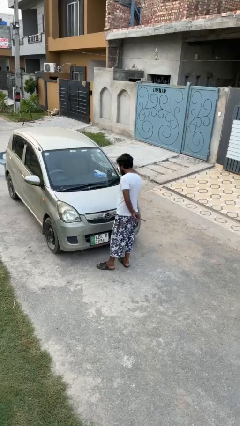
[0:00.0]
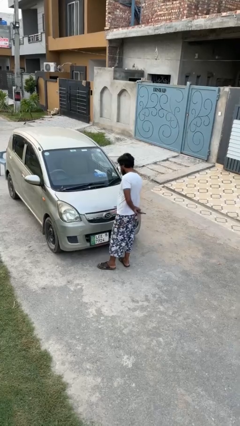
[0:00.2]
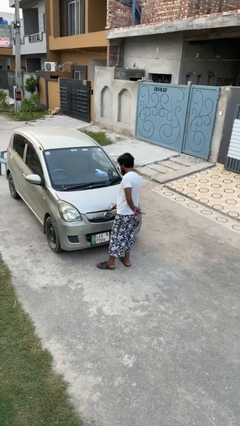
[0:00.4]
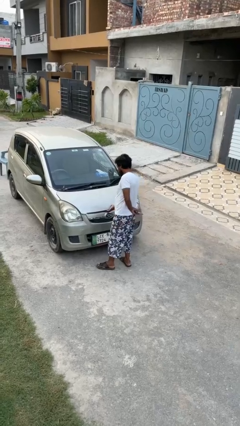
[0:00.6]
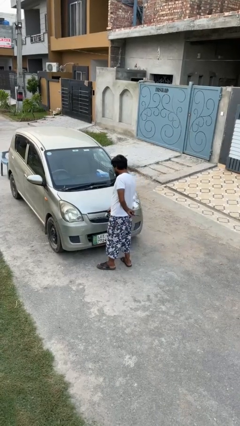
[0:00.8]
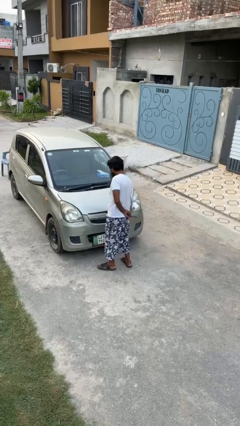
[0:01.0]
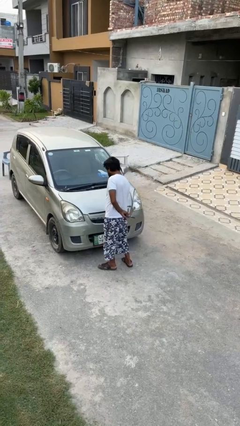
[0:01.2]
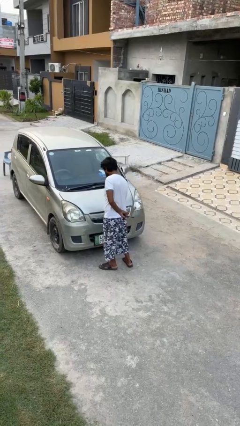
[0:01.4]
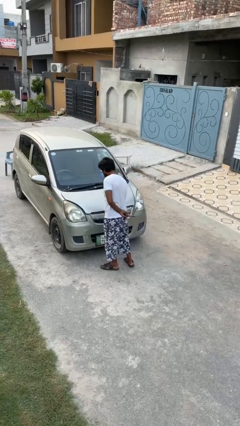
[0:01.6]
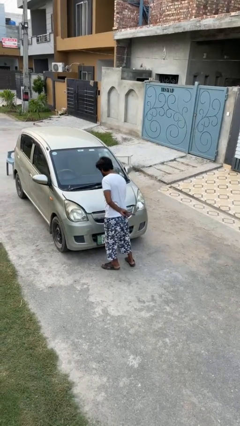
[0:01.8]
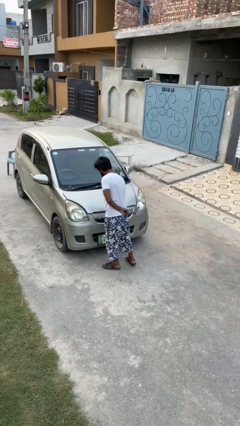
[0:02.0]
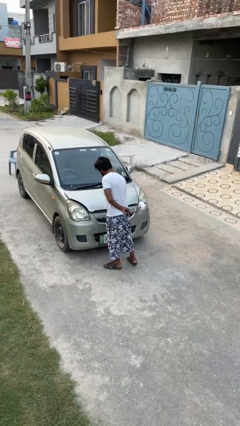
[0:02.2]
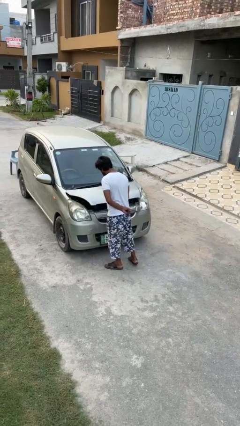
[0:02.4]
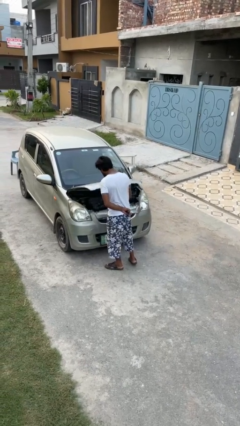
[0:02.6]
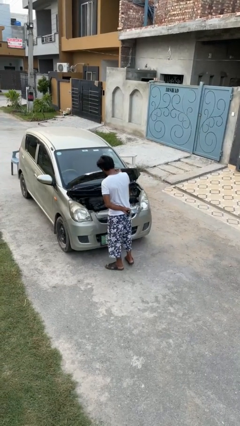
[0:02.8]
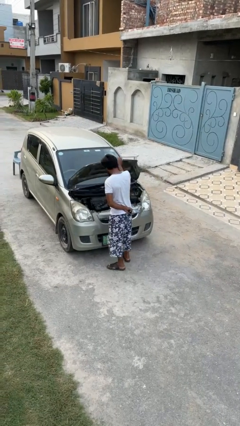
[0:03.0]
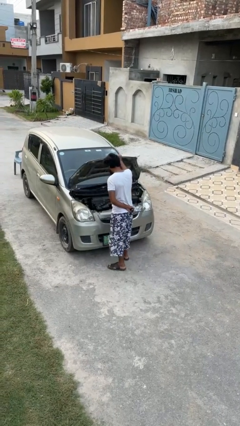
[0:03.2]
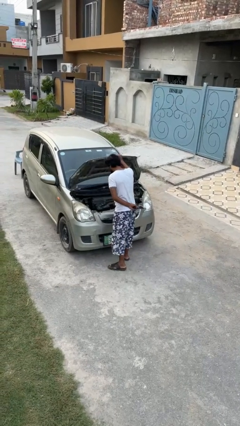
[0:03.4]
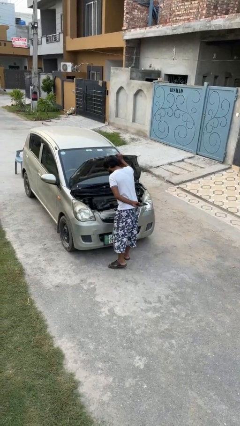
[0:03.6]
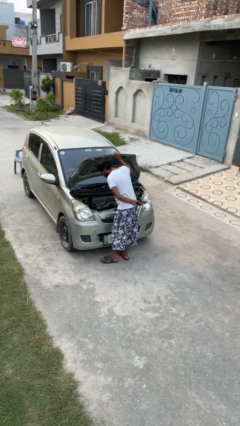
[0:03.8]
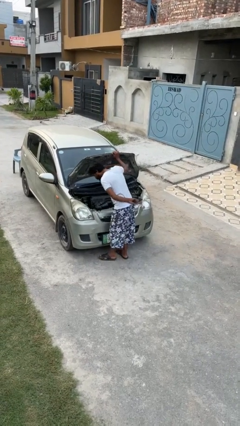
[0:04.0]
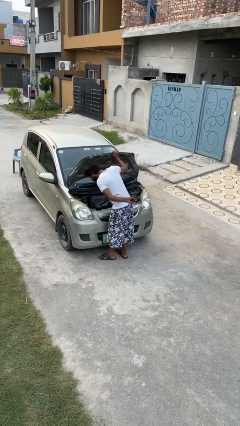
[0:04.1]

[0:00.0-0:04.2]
person opens car hood

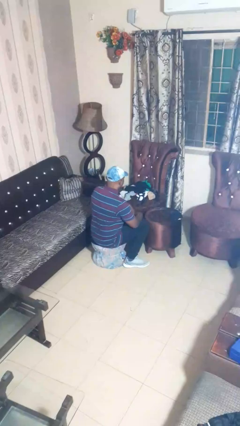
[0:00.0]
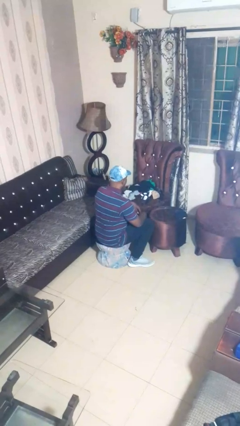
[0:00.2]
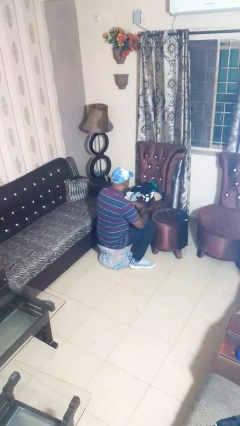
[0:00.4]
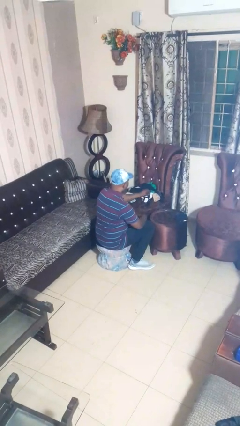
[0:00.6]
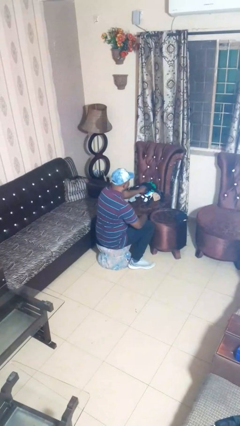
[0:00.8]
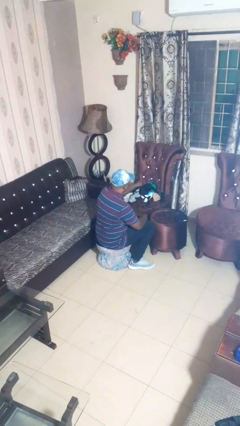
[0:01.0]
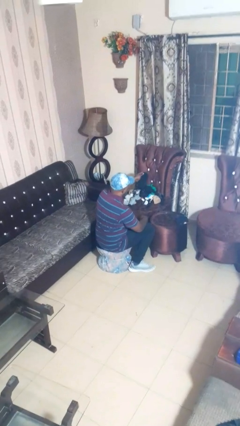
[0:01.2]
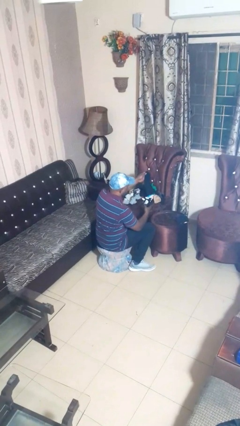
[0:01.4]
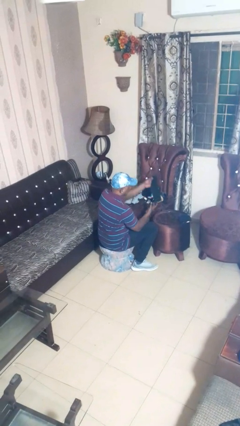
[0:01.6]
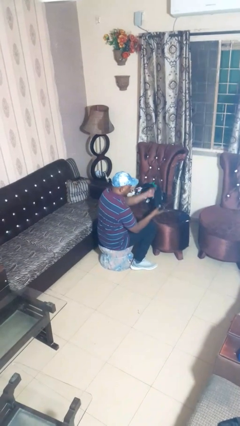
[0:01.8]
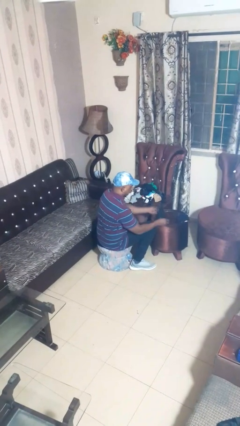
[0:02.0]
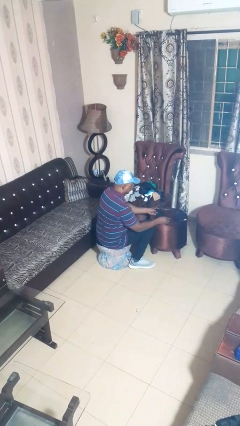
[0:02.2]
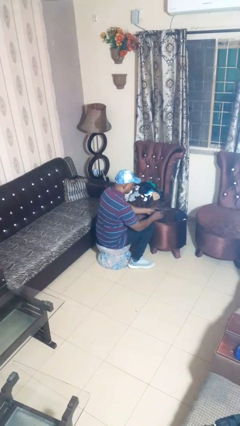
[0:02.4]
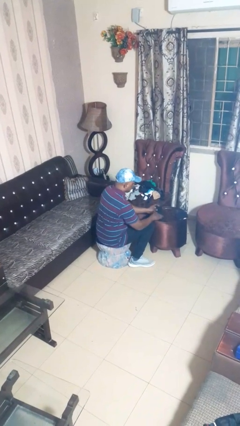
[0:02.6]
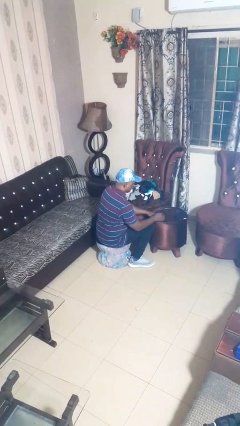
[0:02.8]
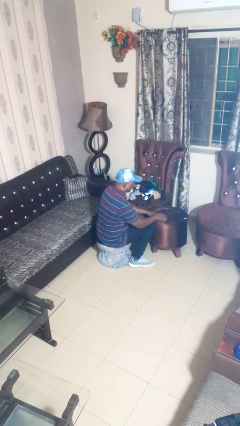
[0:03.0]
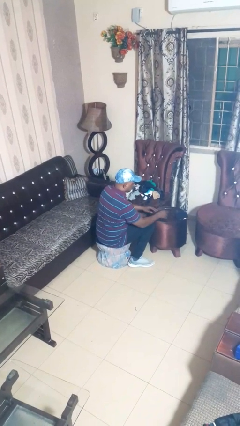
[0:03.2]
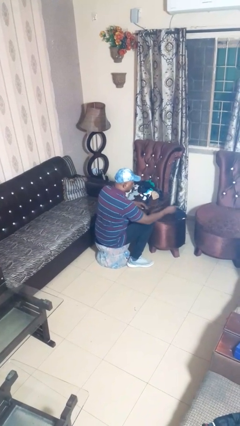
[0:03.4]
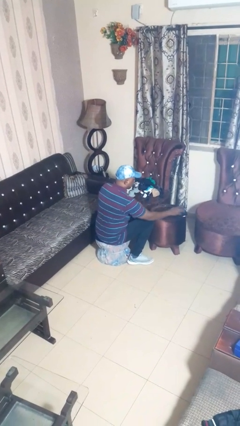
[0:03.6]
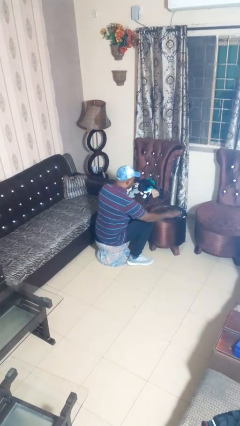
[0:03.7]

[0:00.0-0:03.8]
person folds socks

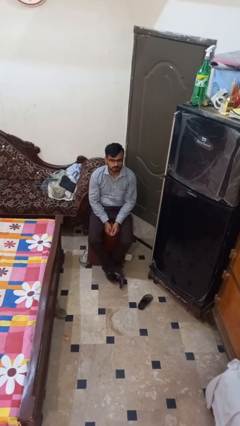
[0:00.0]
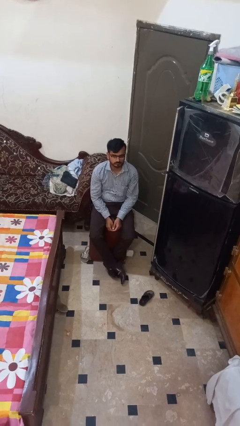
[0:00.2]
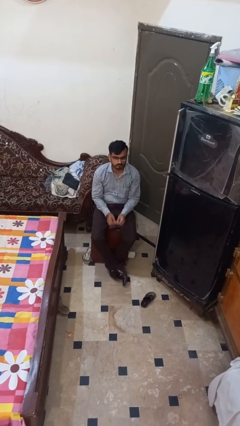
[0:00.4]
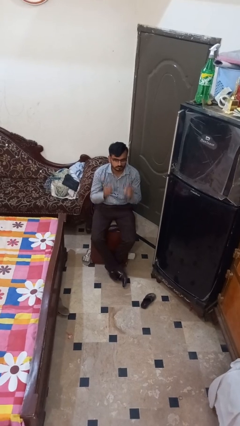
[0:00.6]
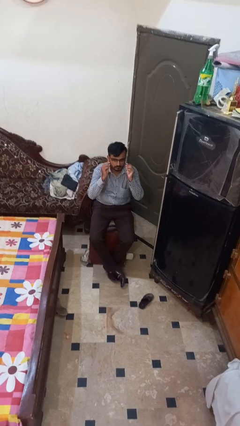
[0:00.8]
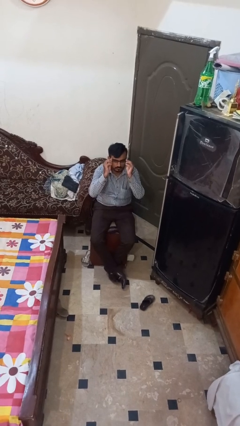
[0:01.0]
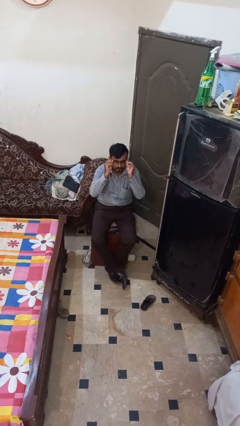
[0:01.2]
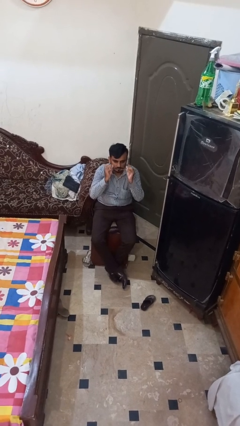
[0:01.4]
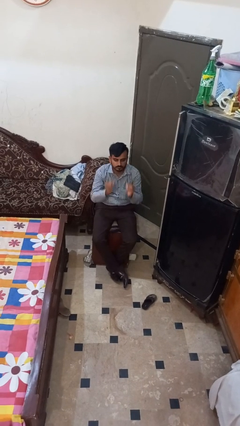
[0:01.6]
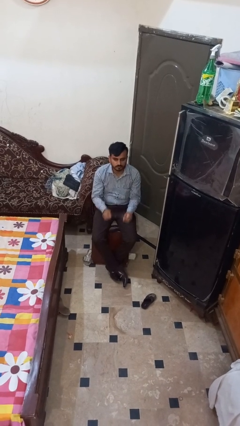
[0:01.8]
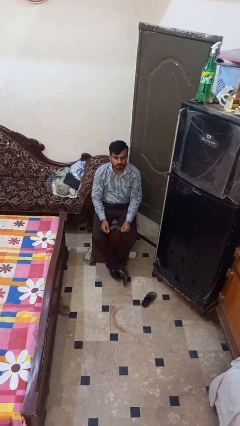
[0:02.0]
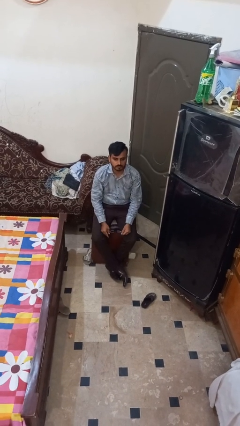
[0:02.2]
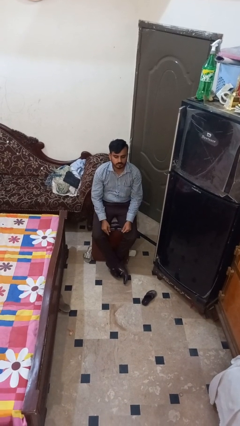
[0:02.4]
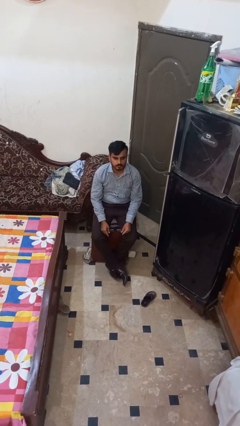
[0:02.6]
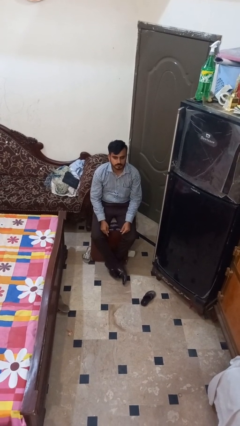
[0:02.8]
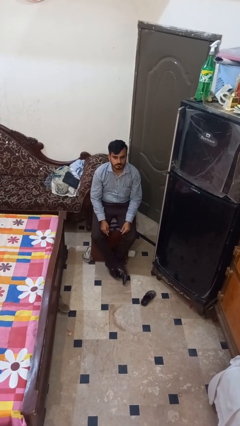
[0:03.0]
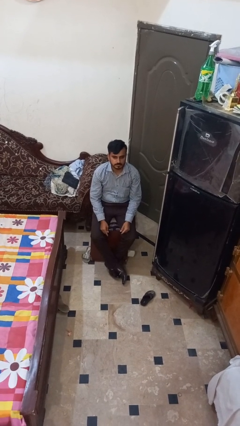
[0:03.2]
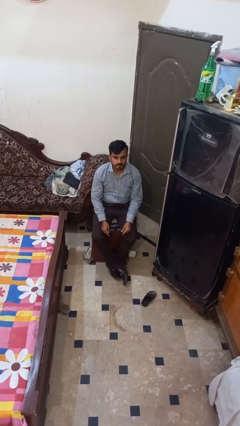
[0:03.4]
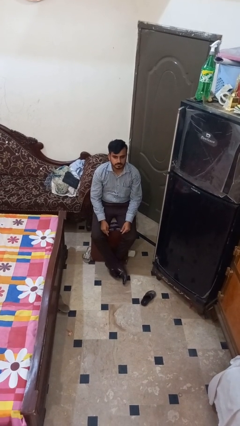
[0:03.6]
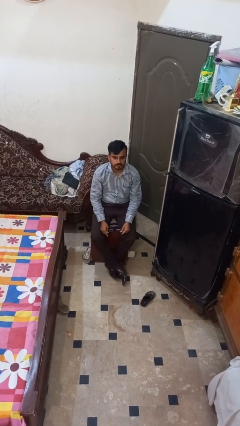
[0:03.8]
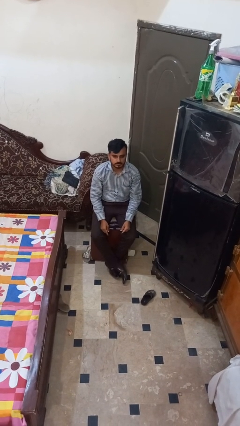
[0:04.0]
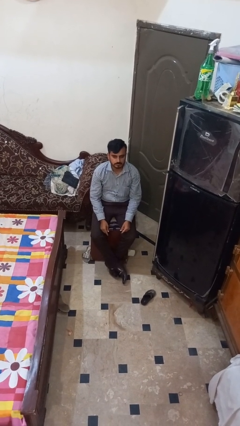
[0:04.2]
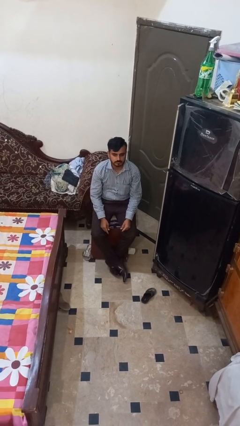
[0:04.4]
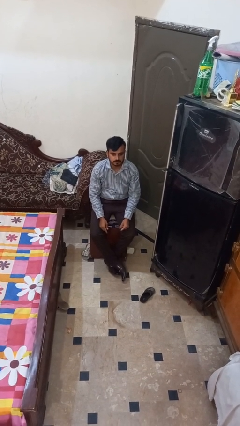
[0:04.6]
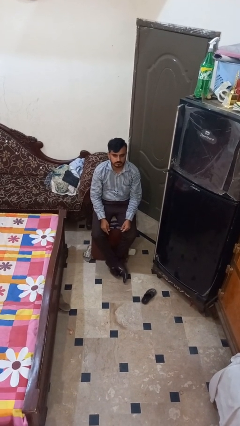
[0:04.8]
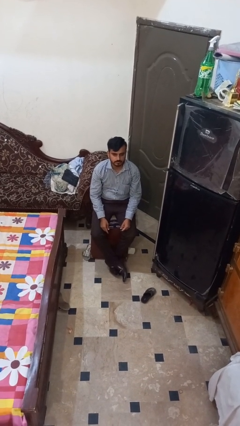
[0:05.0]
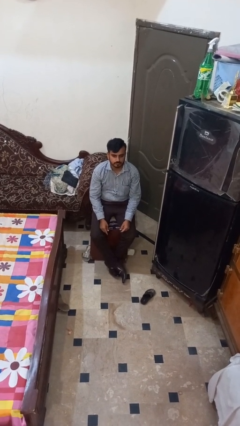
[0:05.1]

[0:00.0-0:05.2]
person takes off glasses

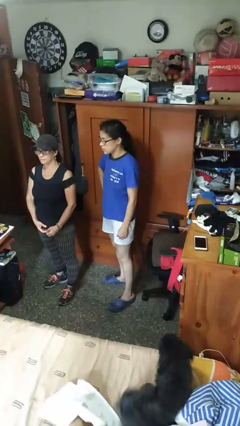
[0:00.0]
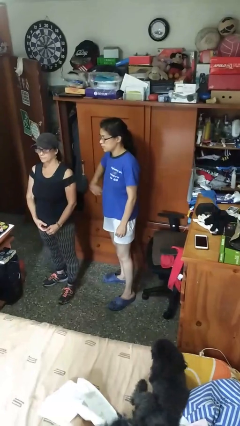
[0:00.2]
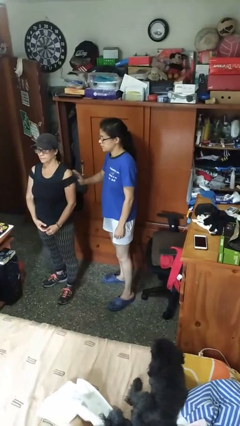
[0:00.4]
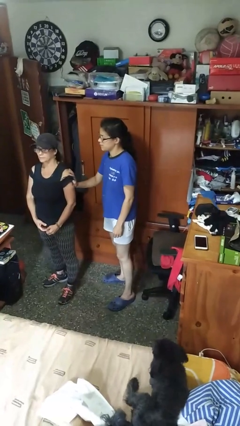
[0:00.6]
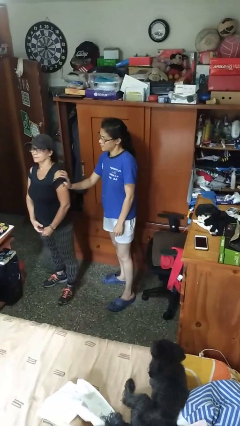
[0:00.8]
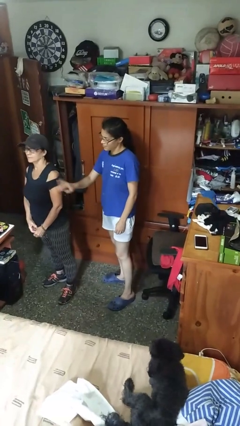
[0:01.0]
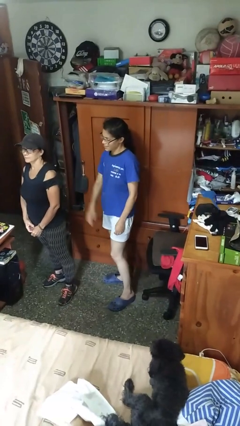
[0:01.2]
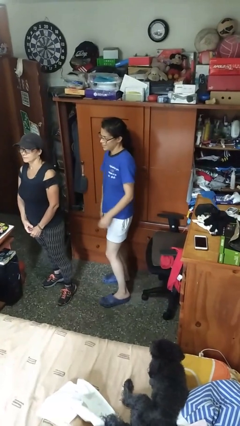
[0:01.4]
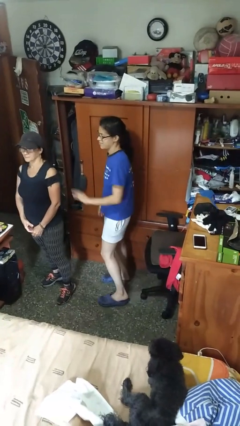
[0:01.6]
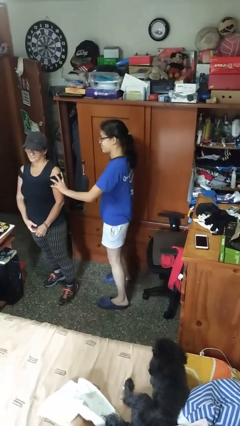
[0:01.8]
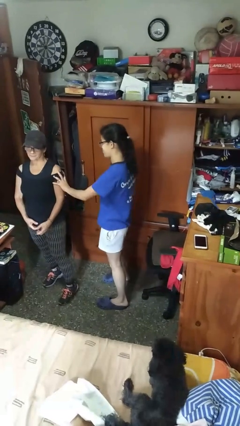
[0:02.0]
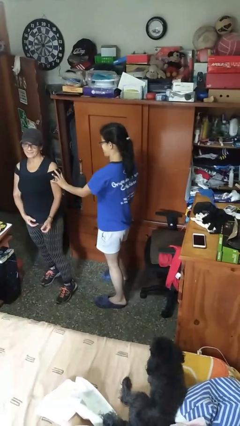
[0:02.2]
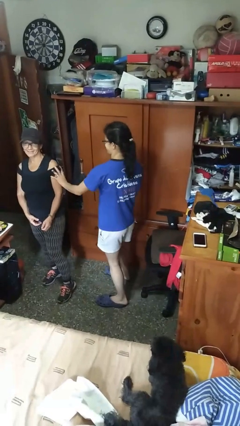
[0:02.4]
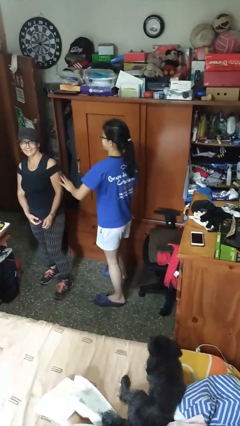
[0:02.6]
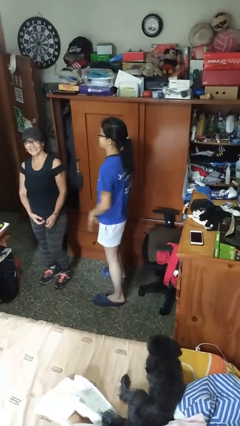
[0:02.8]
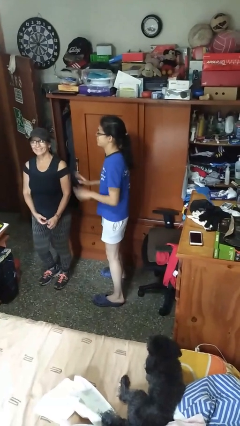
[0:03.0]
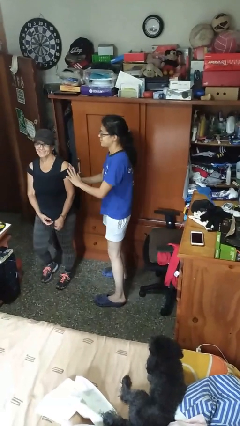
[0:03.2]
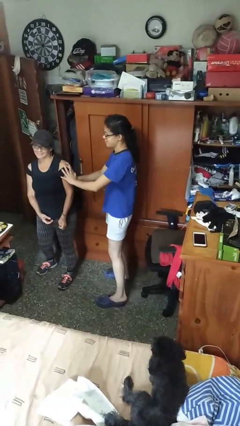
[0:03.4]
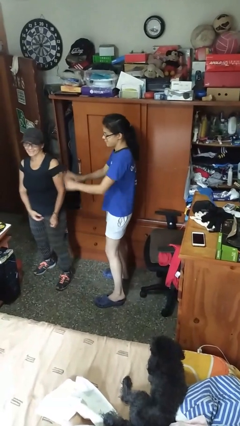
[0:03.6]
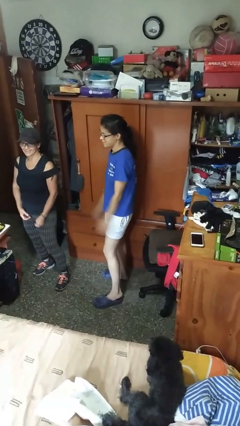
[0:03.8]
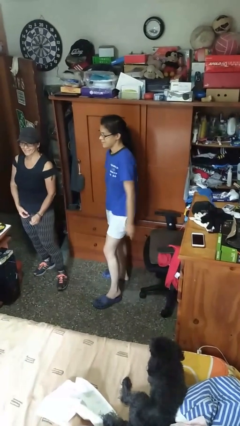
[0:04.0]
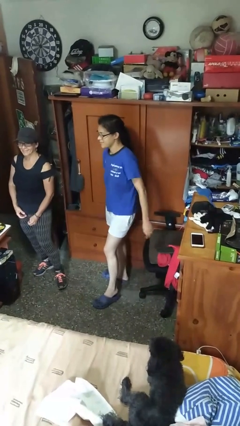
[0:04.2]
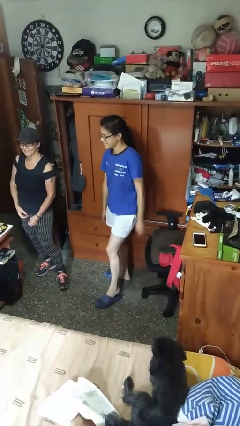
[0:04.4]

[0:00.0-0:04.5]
person shoves person

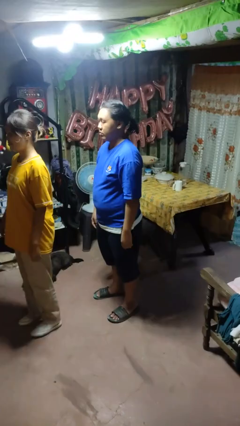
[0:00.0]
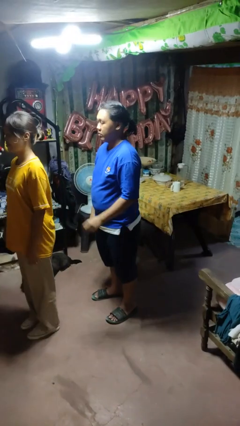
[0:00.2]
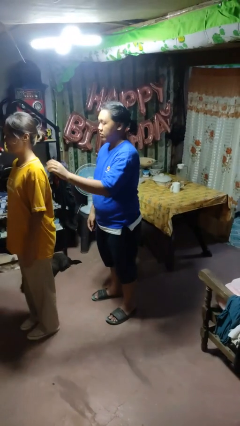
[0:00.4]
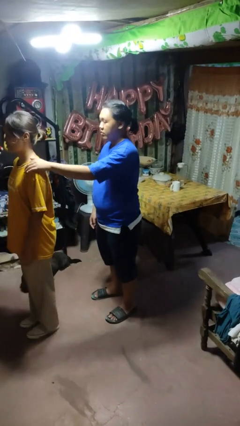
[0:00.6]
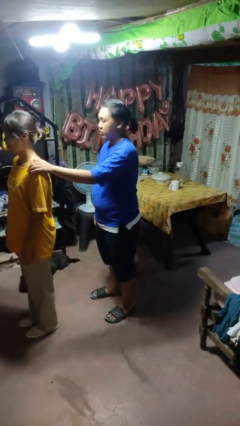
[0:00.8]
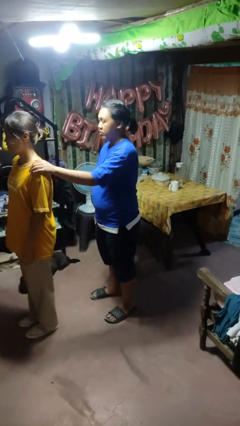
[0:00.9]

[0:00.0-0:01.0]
person grabs person by shoulder
